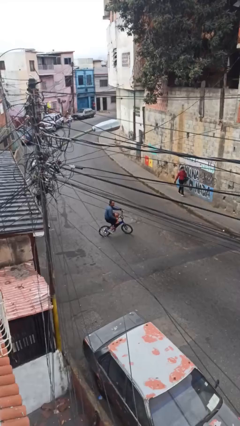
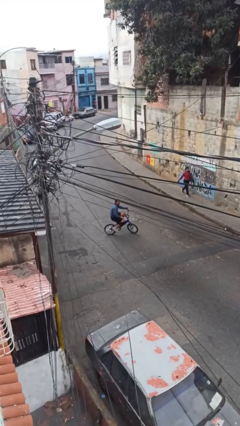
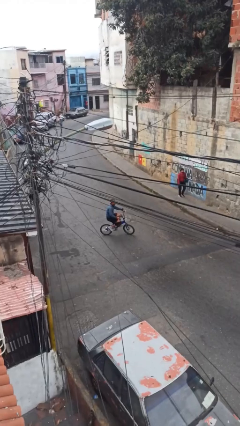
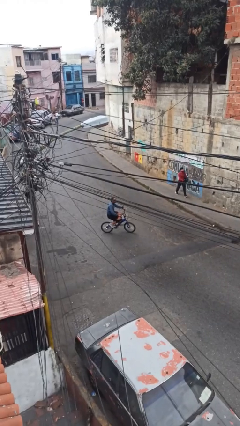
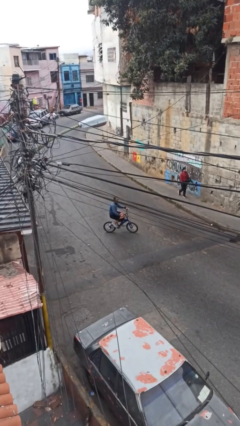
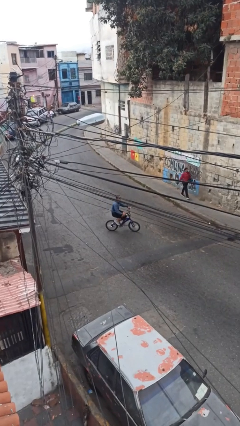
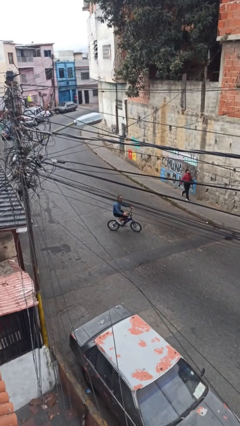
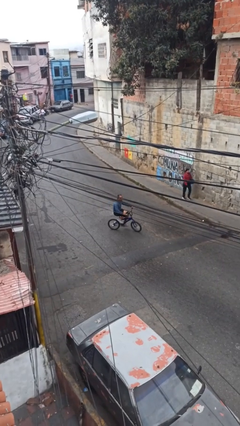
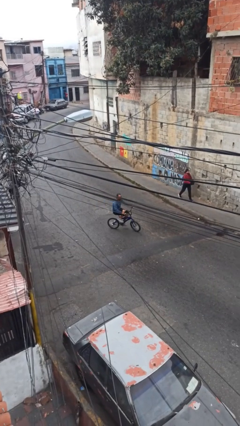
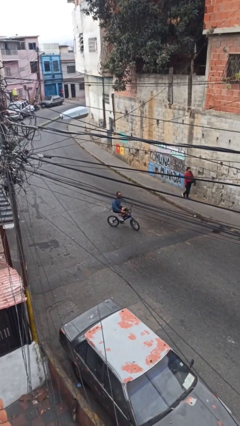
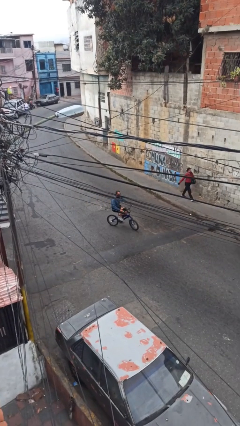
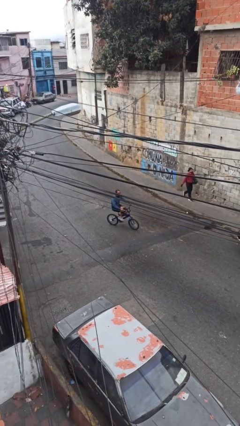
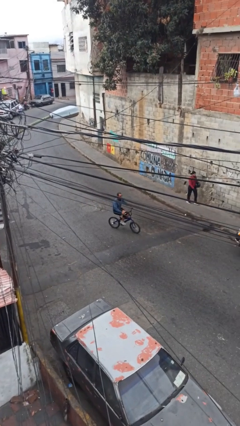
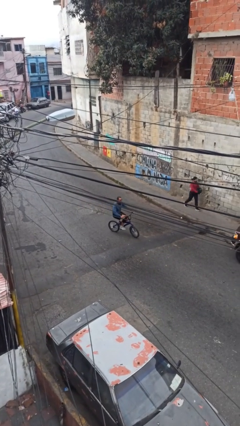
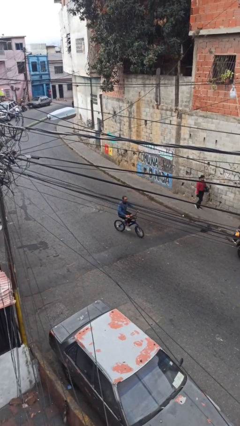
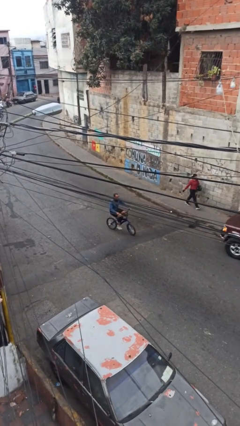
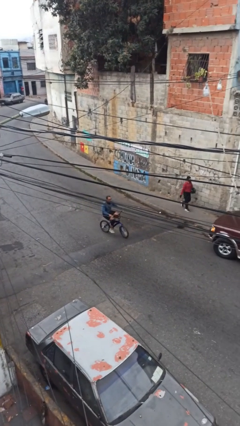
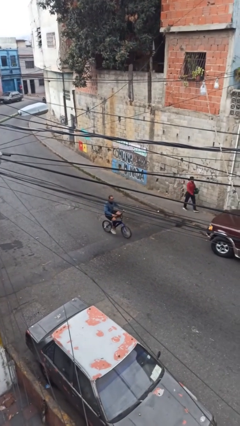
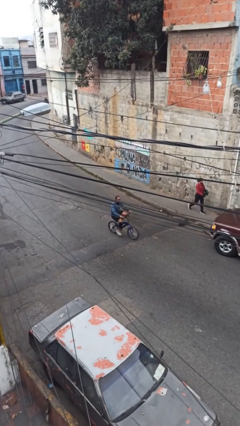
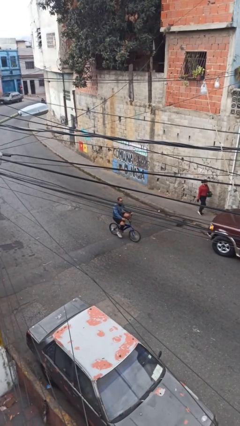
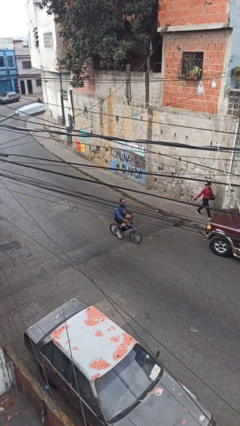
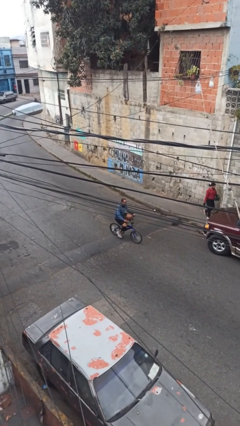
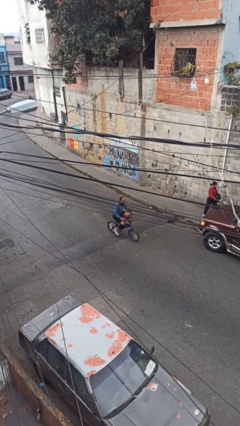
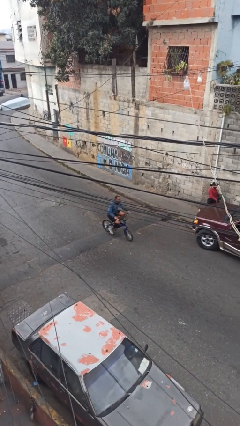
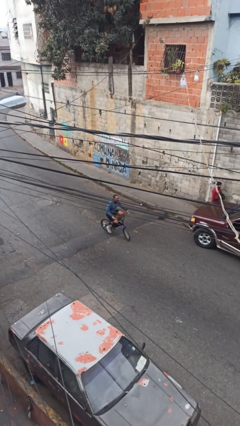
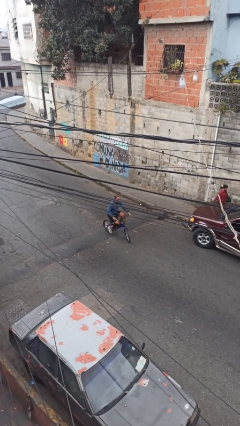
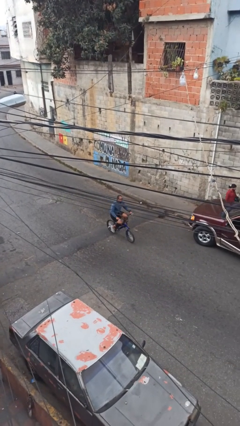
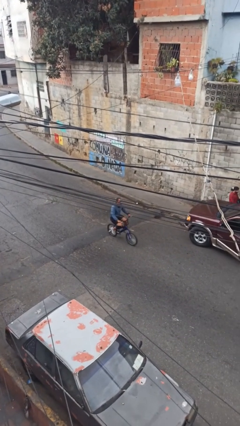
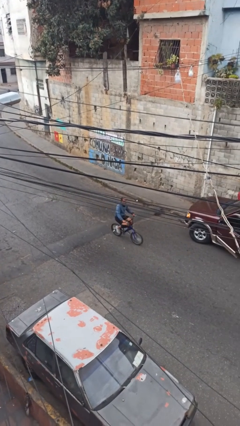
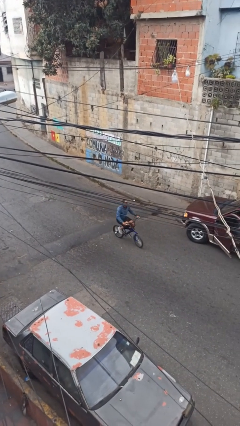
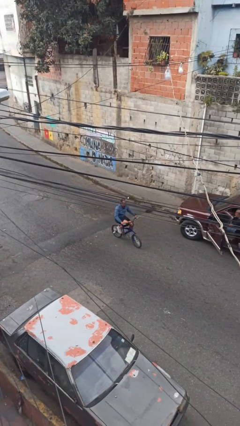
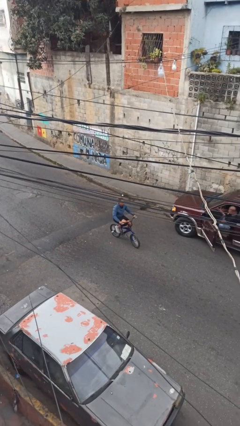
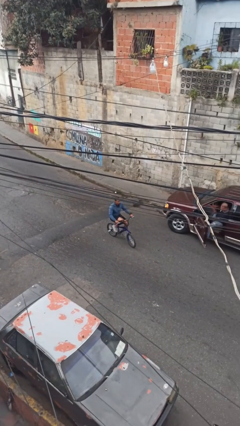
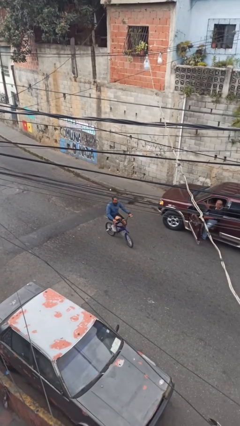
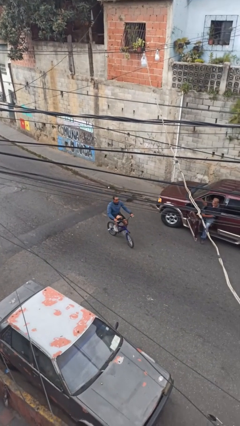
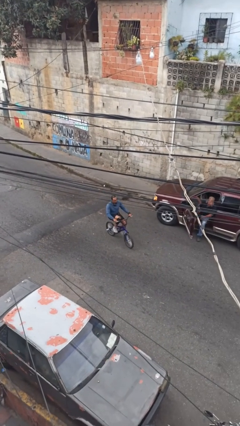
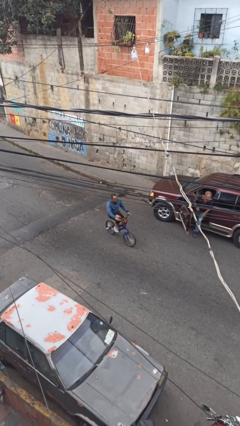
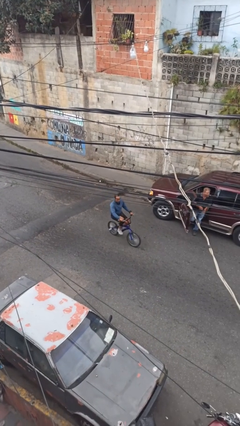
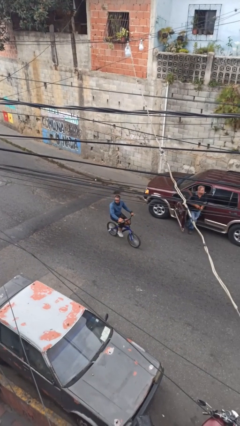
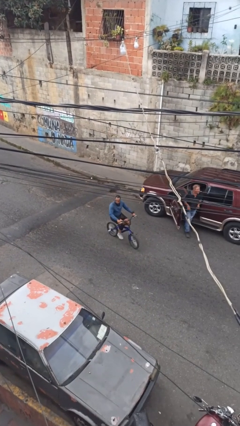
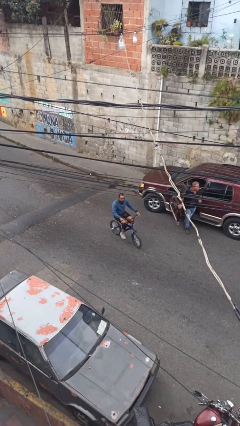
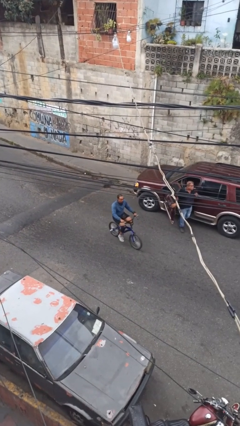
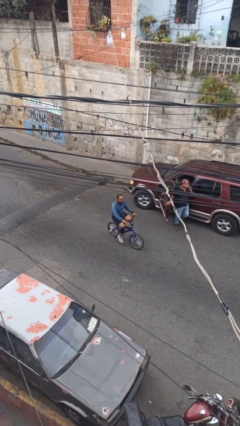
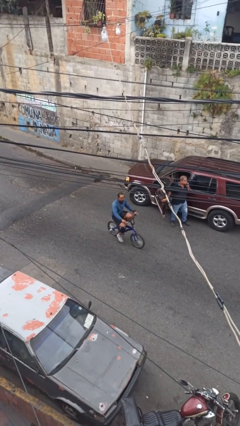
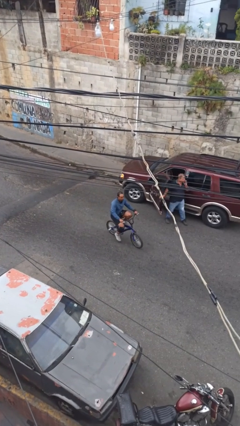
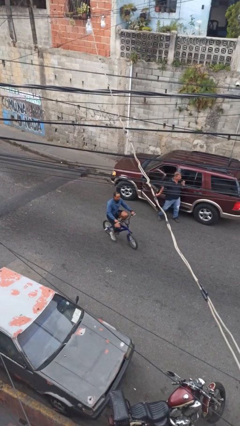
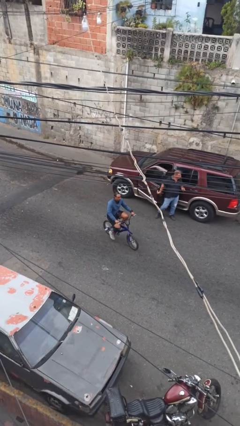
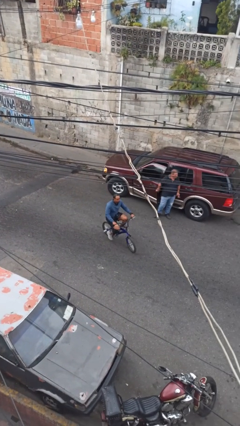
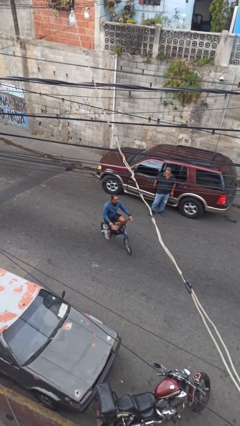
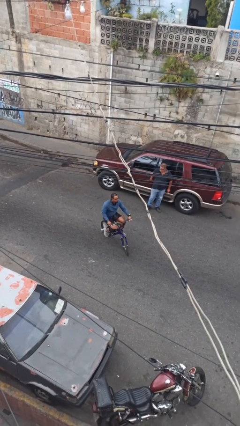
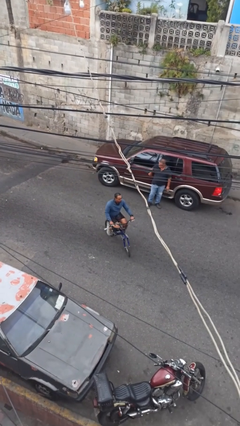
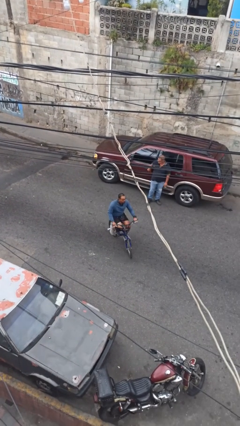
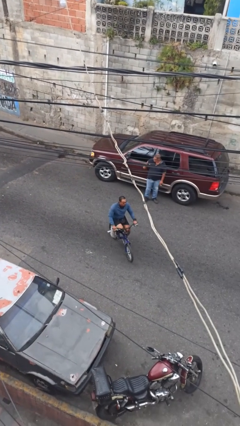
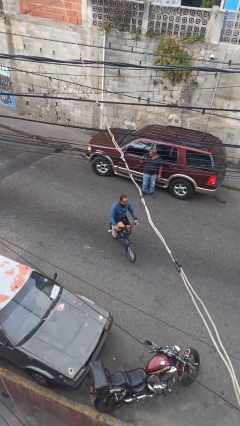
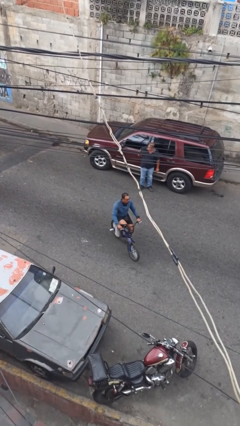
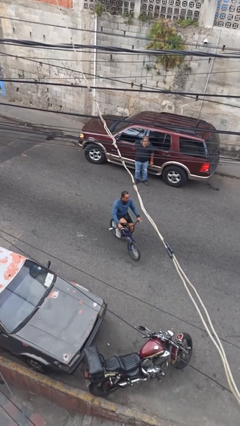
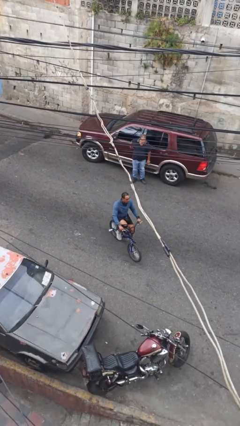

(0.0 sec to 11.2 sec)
person rides bicycle

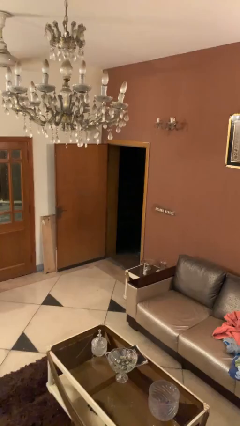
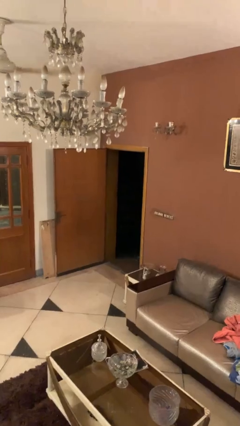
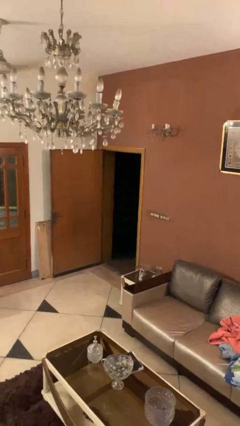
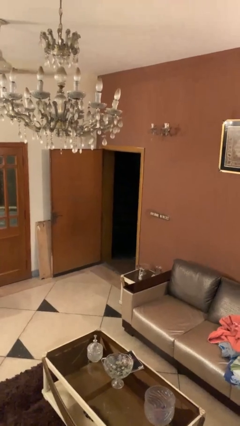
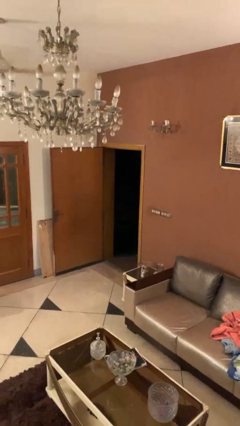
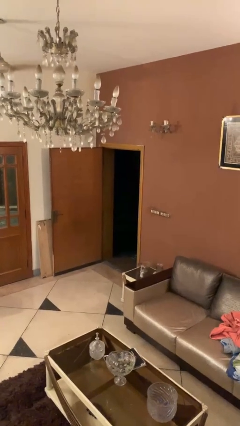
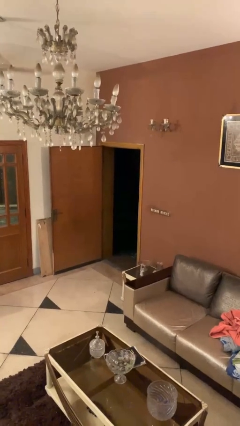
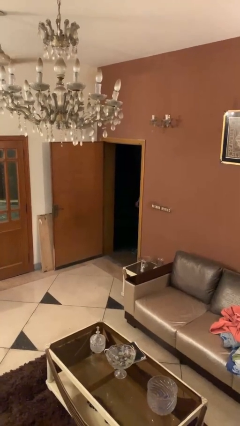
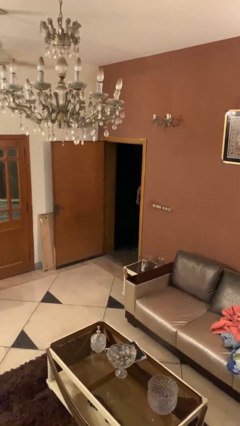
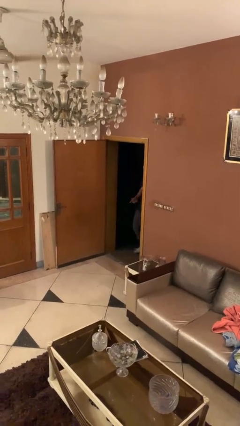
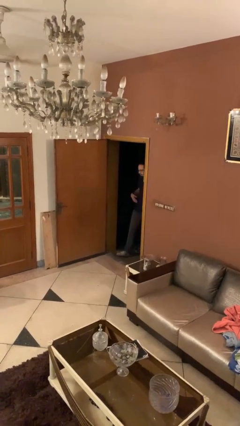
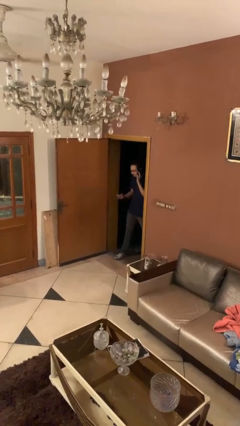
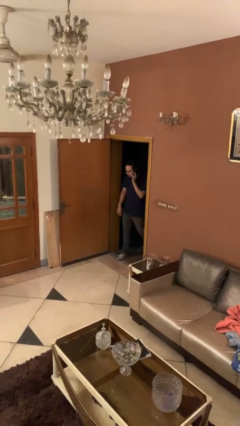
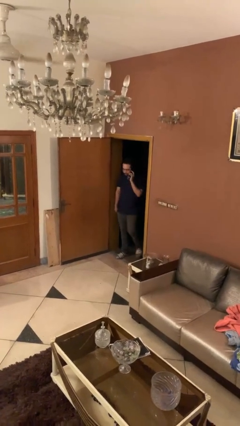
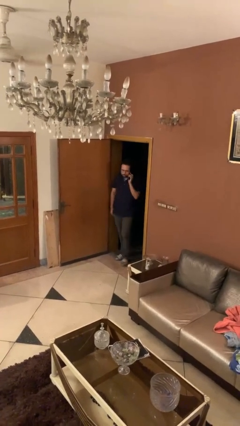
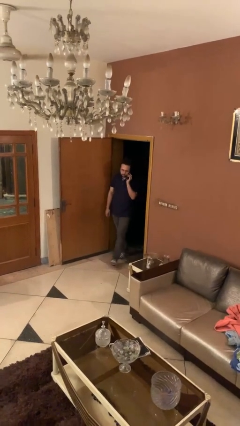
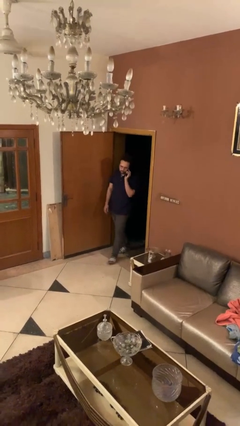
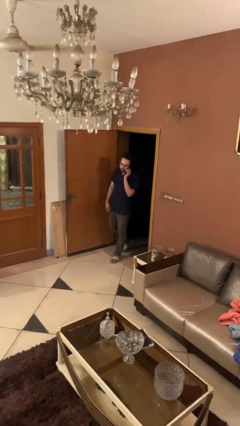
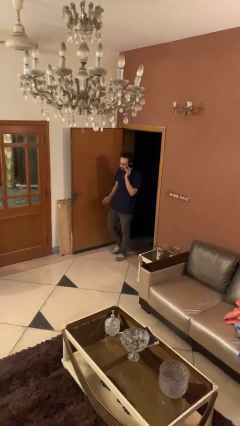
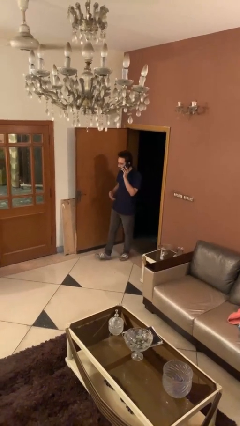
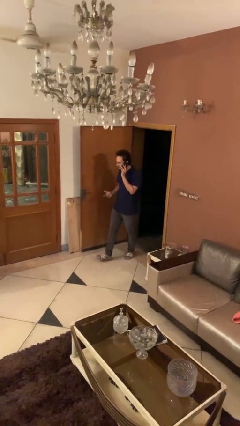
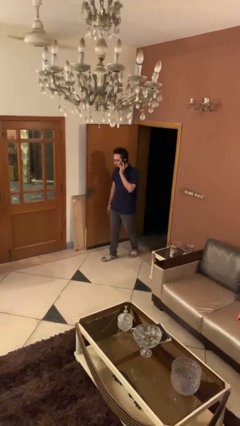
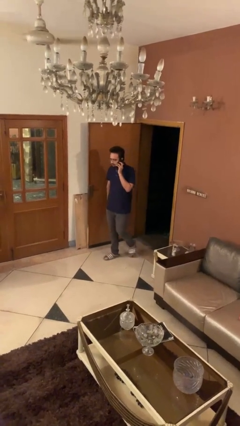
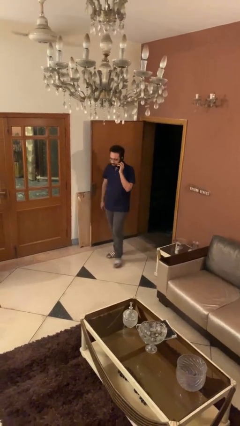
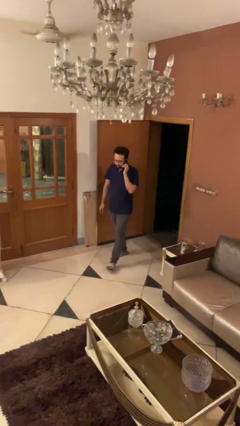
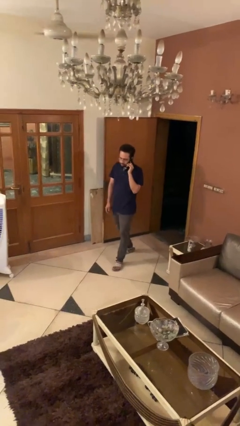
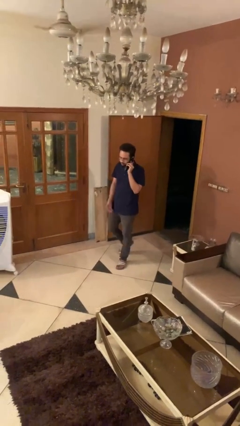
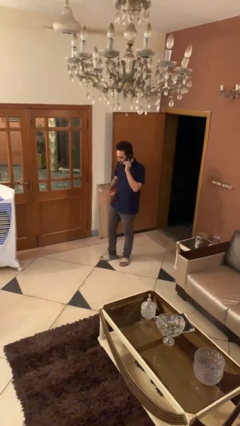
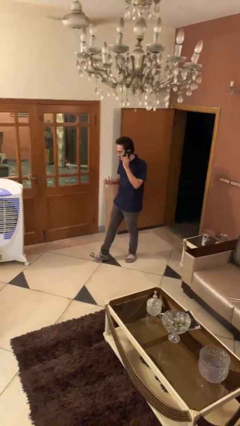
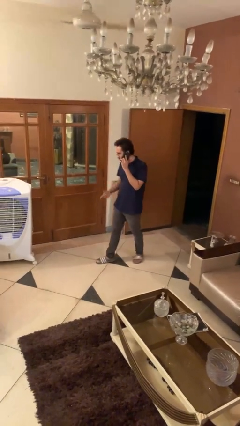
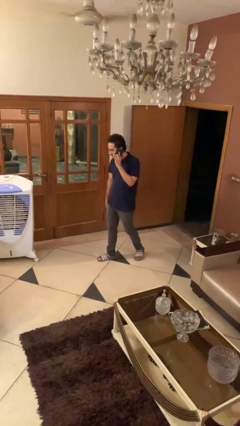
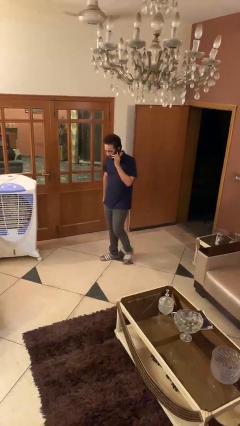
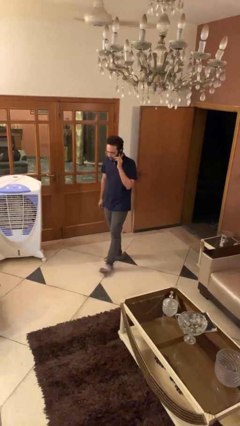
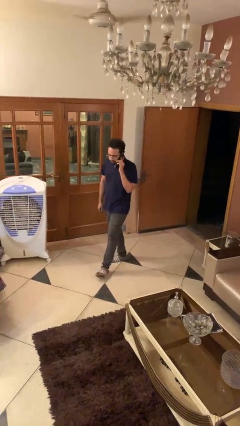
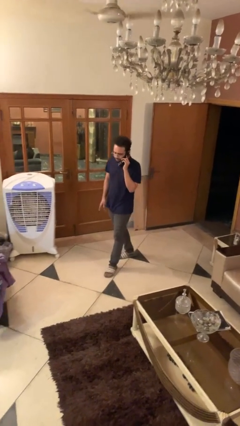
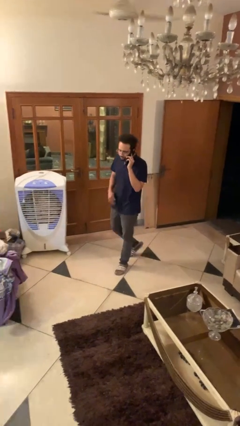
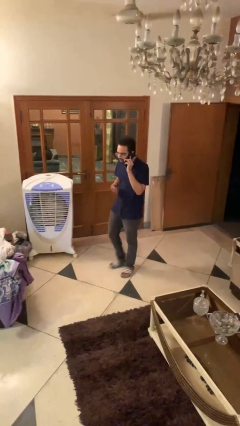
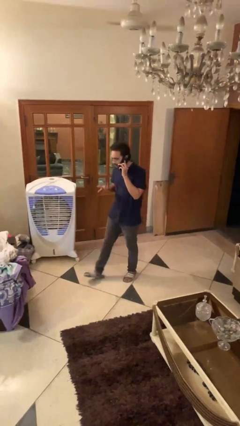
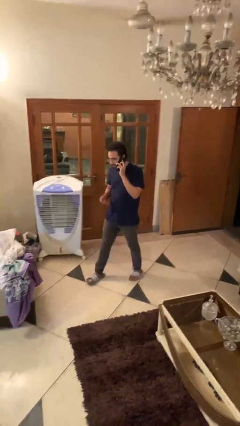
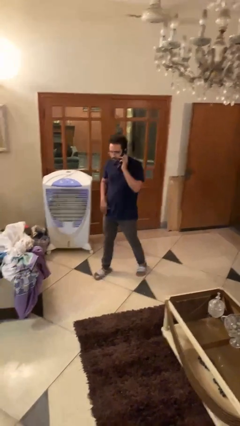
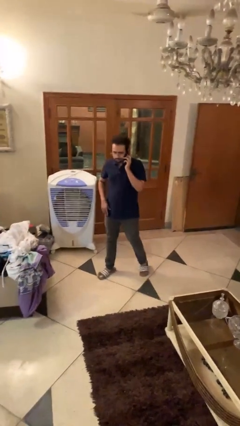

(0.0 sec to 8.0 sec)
person enters scene through structure
